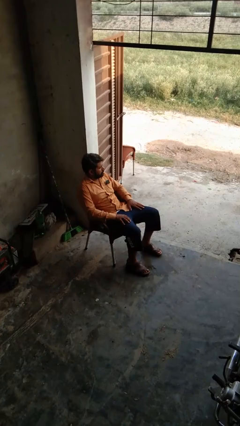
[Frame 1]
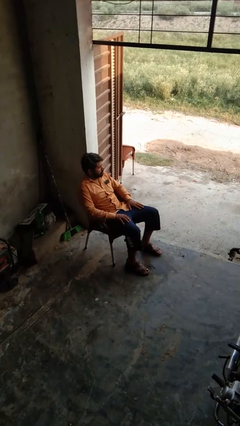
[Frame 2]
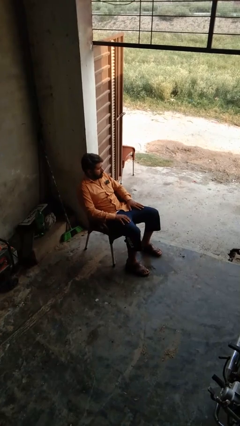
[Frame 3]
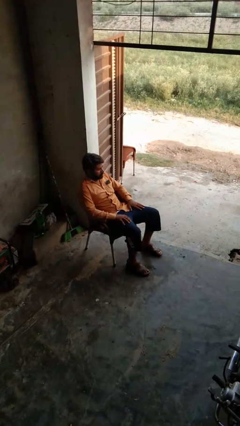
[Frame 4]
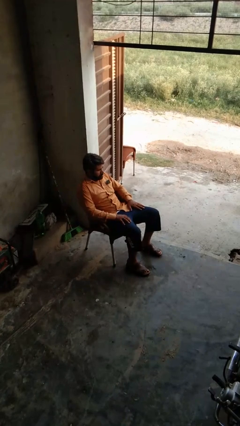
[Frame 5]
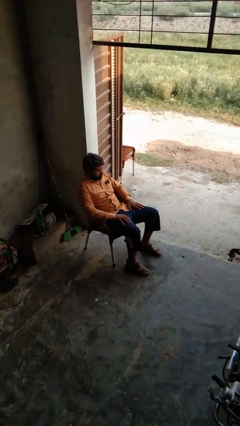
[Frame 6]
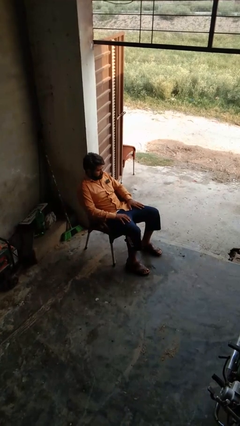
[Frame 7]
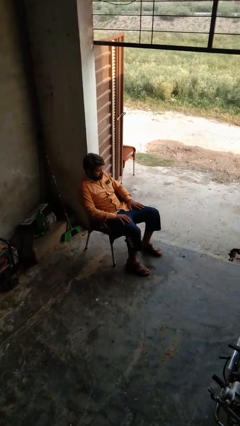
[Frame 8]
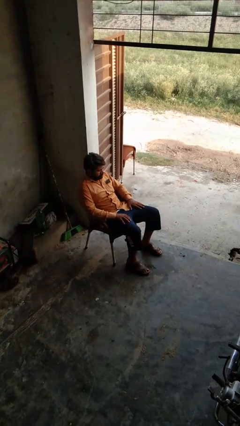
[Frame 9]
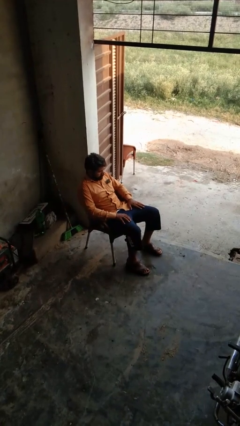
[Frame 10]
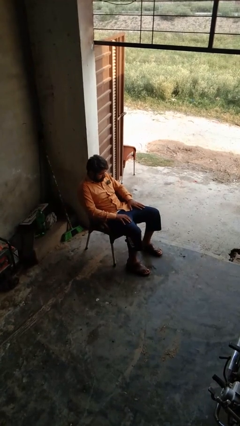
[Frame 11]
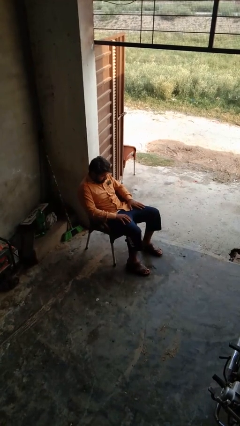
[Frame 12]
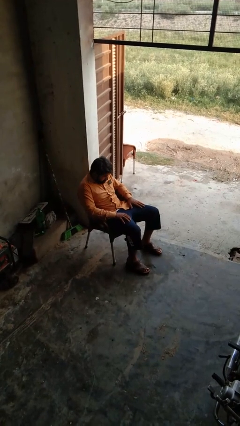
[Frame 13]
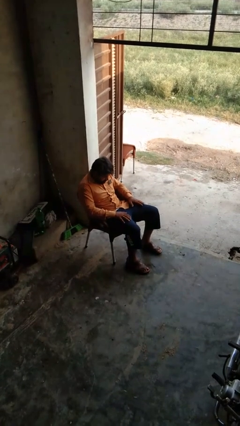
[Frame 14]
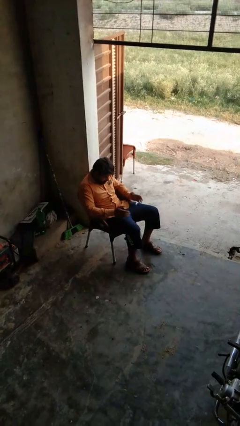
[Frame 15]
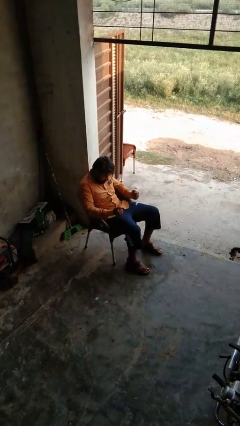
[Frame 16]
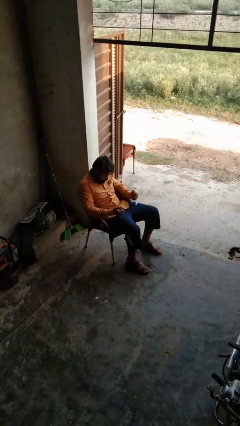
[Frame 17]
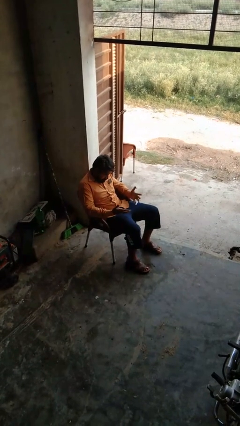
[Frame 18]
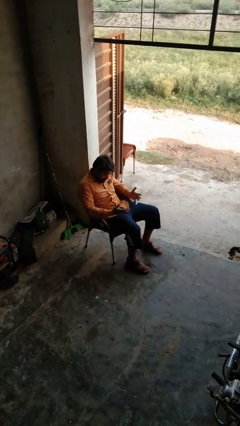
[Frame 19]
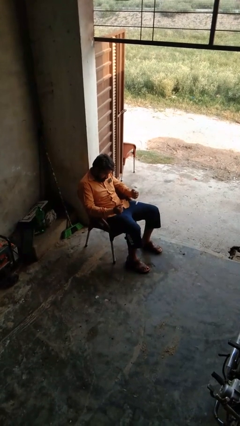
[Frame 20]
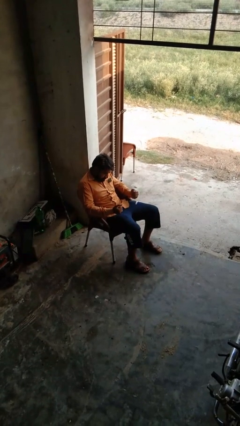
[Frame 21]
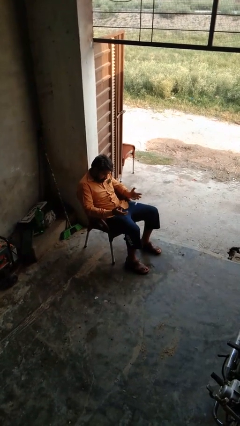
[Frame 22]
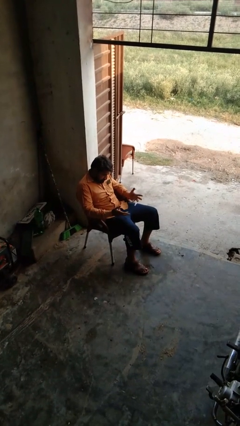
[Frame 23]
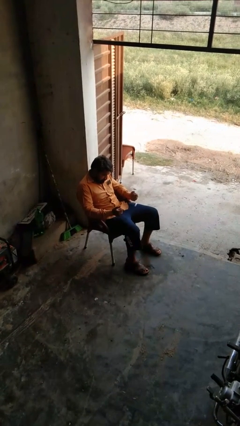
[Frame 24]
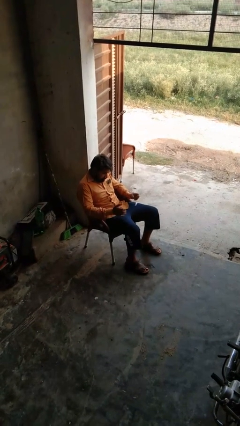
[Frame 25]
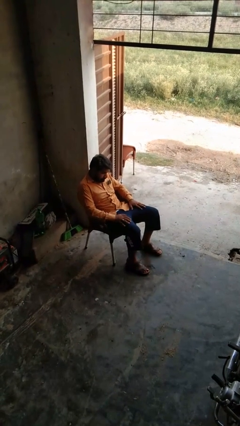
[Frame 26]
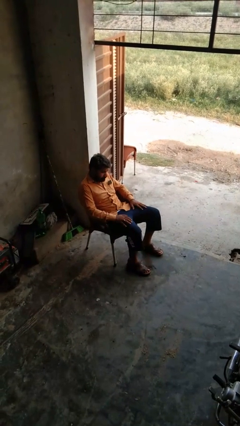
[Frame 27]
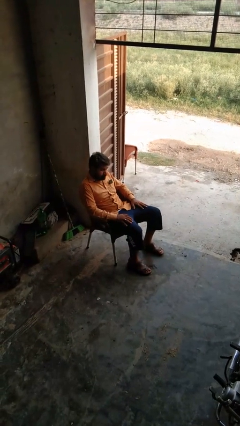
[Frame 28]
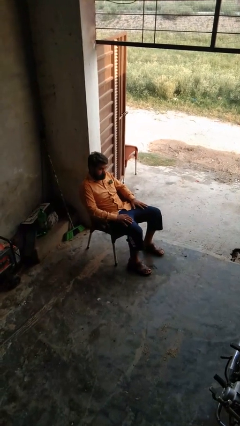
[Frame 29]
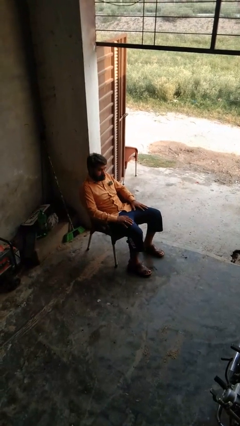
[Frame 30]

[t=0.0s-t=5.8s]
person looks at hands in lap

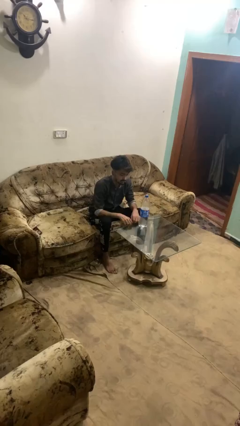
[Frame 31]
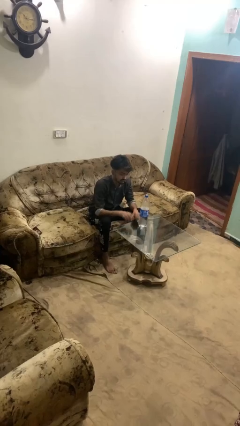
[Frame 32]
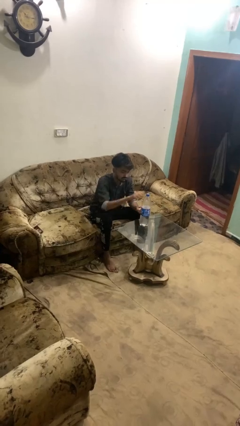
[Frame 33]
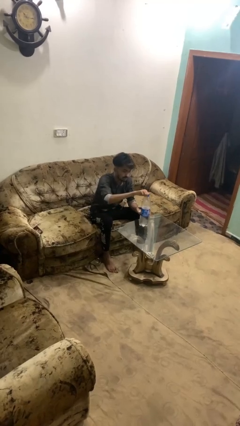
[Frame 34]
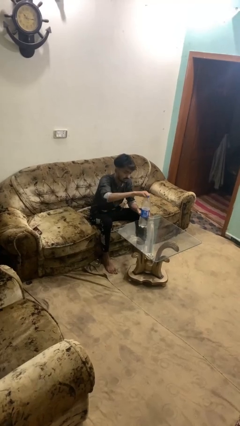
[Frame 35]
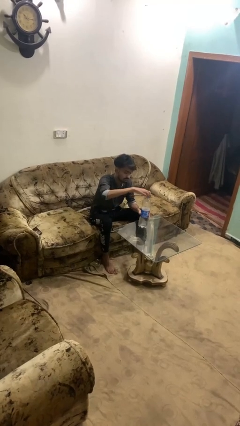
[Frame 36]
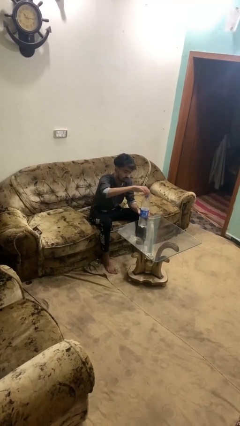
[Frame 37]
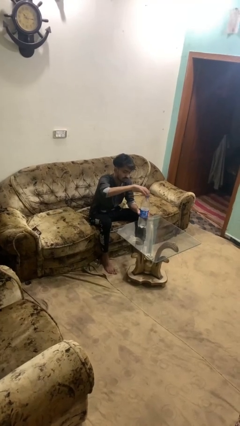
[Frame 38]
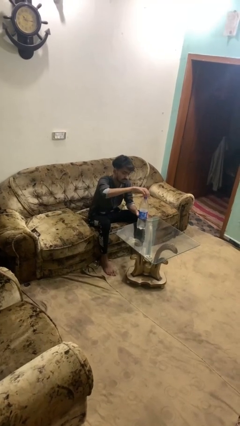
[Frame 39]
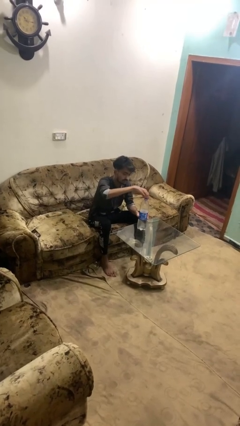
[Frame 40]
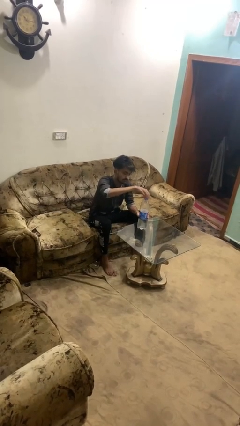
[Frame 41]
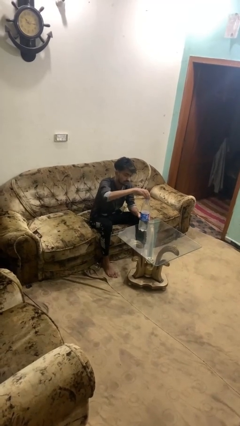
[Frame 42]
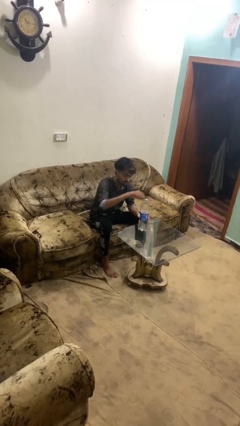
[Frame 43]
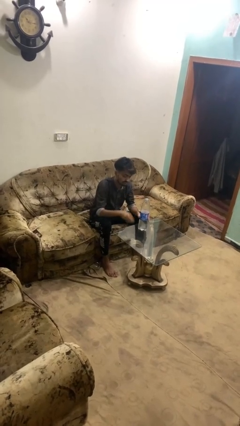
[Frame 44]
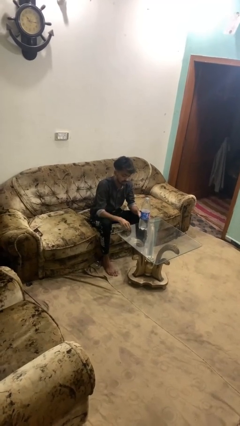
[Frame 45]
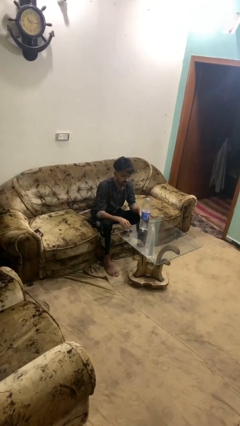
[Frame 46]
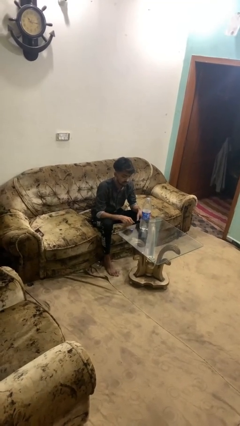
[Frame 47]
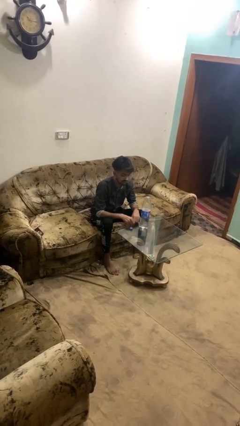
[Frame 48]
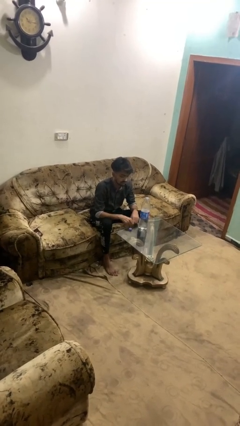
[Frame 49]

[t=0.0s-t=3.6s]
person unscrews lid from bottle

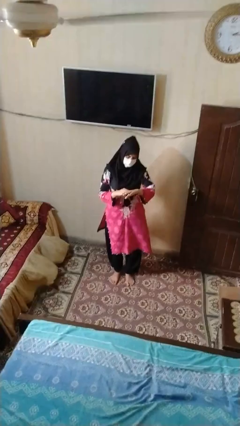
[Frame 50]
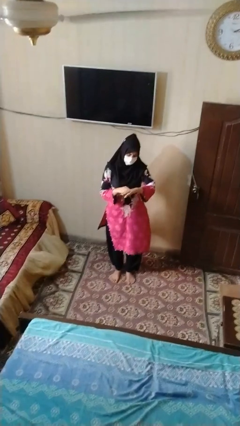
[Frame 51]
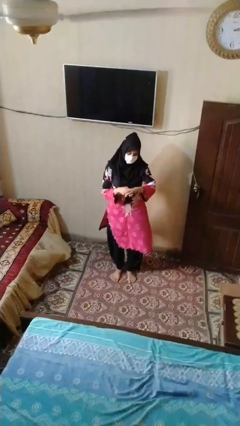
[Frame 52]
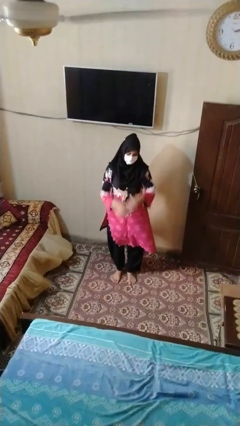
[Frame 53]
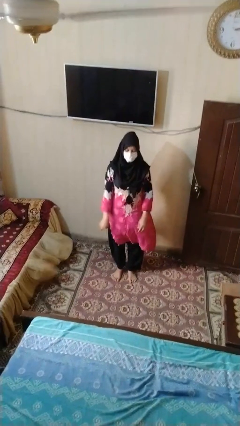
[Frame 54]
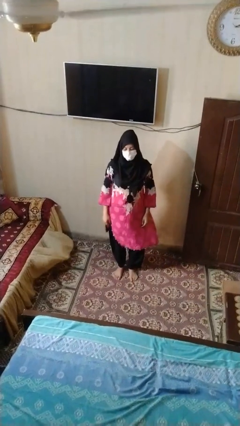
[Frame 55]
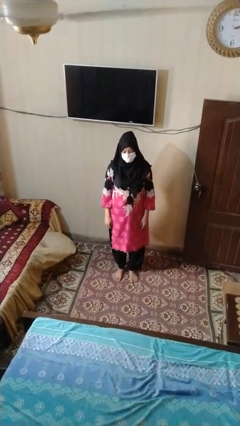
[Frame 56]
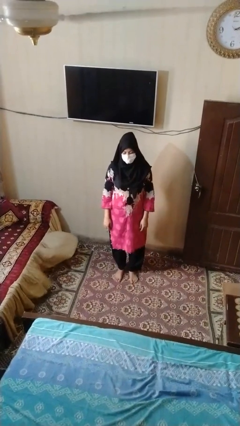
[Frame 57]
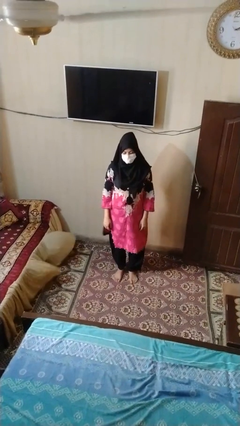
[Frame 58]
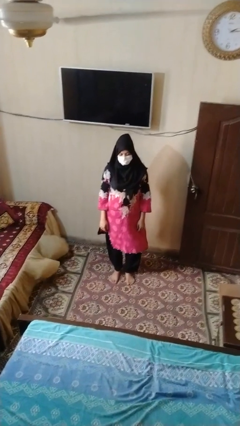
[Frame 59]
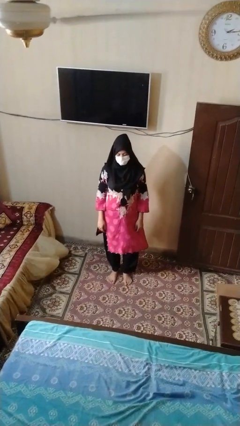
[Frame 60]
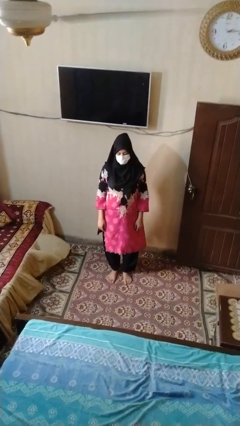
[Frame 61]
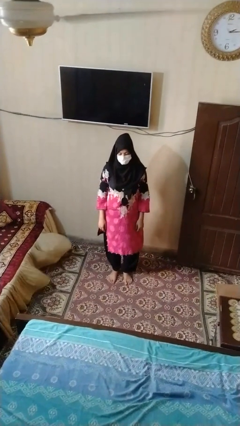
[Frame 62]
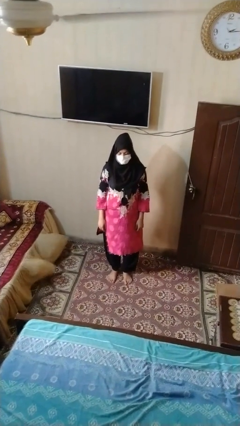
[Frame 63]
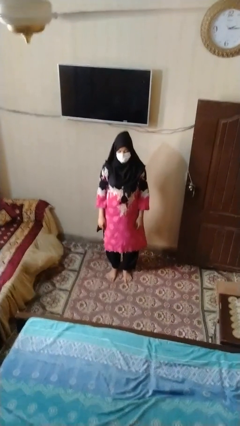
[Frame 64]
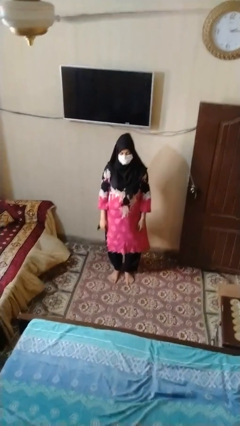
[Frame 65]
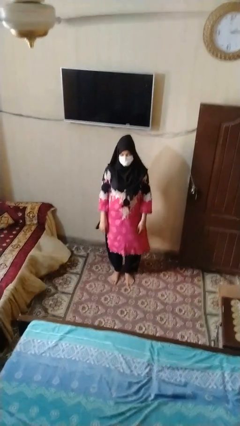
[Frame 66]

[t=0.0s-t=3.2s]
person searches jewelry box

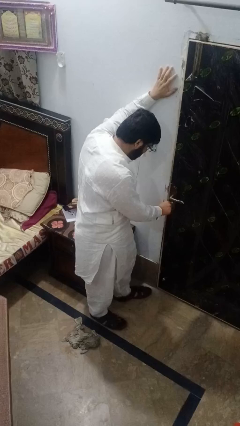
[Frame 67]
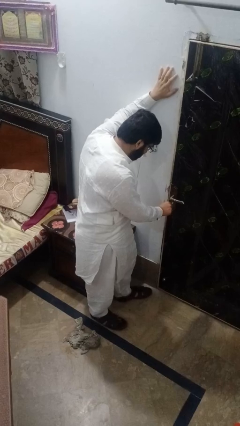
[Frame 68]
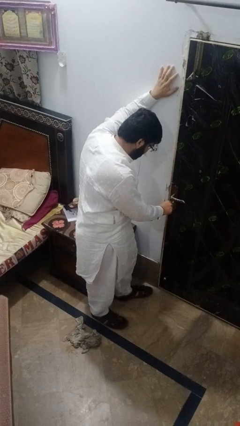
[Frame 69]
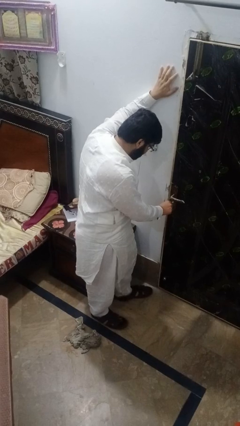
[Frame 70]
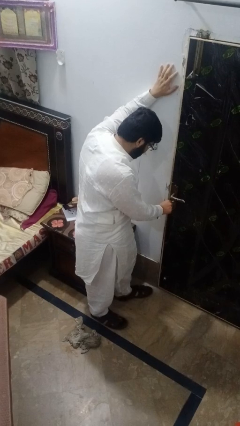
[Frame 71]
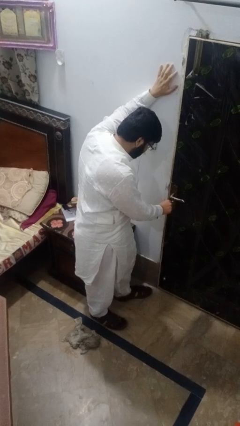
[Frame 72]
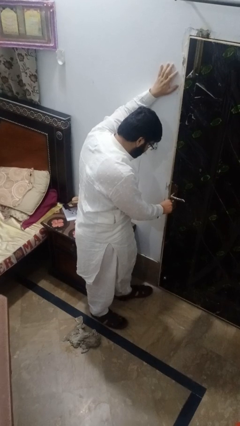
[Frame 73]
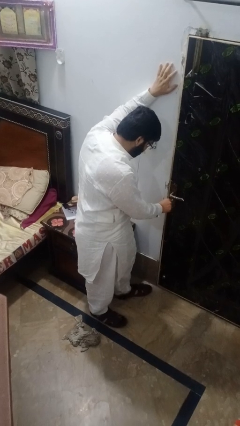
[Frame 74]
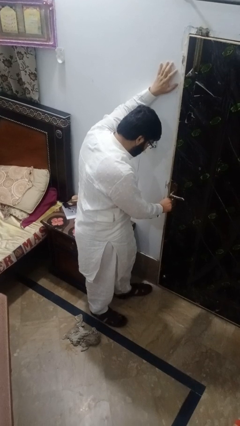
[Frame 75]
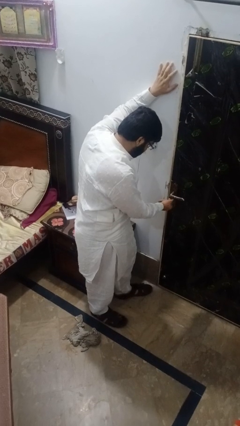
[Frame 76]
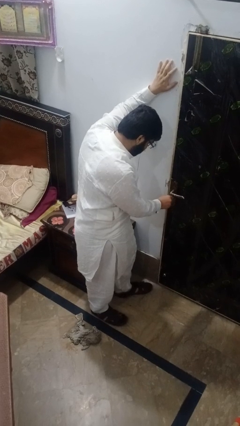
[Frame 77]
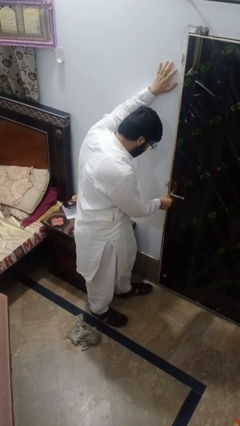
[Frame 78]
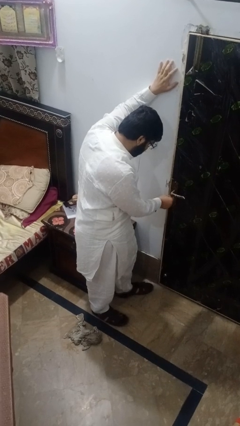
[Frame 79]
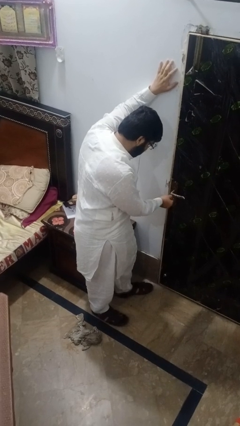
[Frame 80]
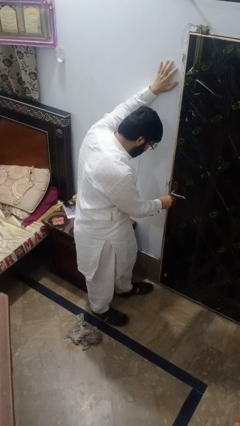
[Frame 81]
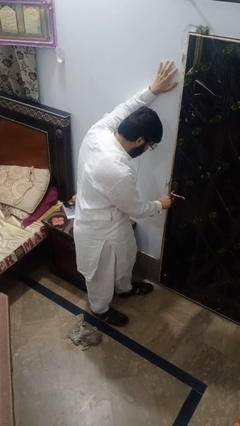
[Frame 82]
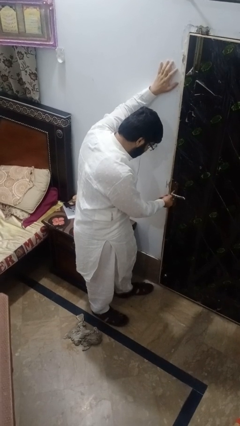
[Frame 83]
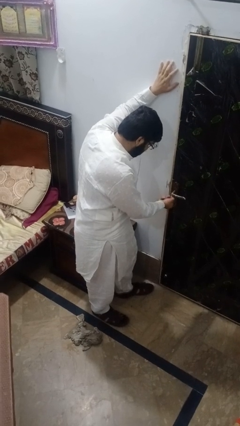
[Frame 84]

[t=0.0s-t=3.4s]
person unlocks door with keys

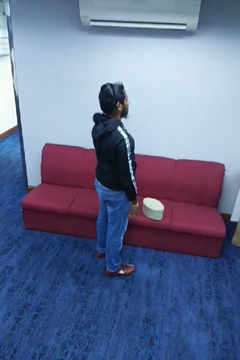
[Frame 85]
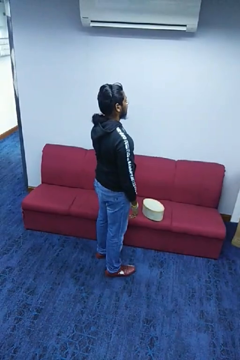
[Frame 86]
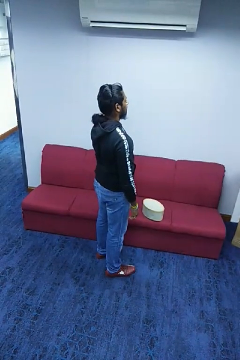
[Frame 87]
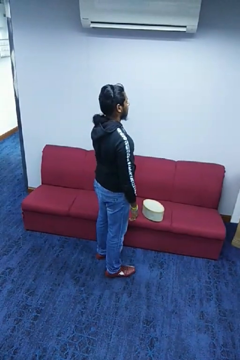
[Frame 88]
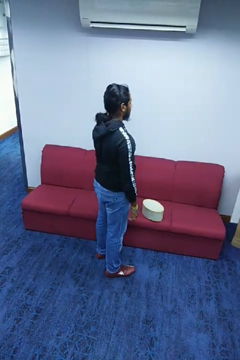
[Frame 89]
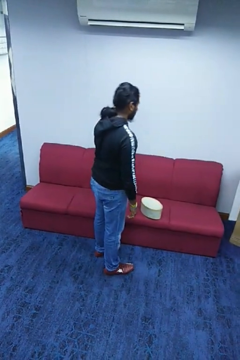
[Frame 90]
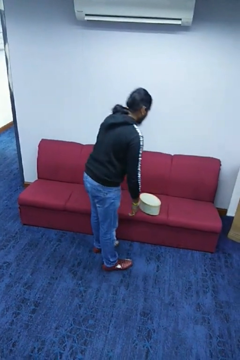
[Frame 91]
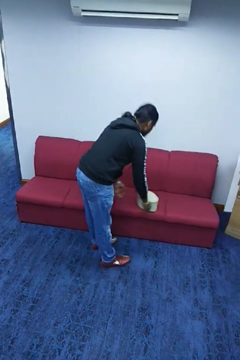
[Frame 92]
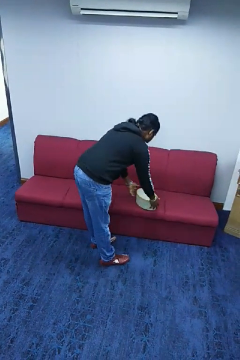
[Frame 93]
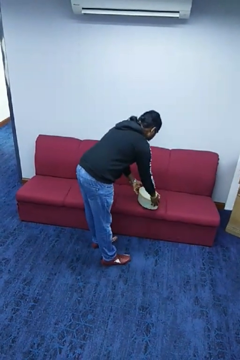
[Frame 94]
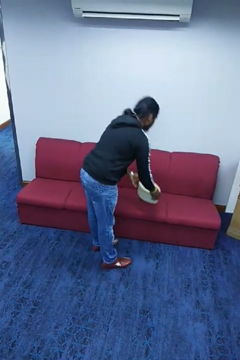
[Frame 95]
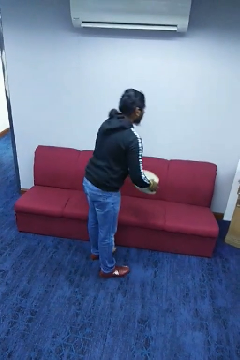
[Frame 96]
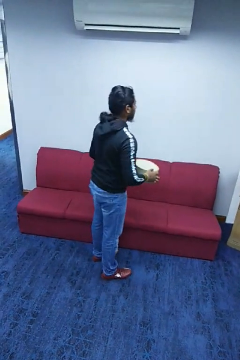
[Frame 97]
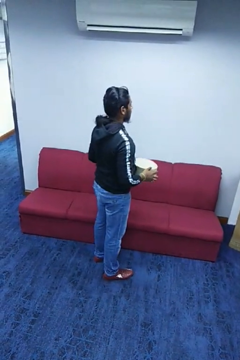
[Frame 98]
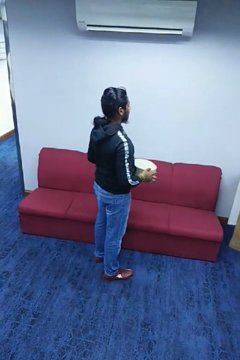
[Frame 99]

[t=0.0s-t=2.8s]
person picks up object from couch
